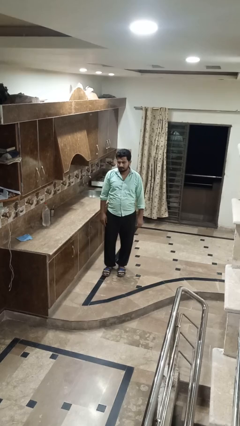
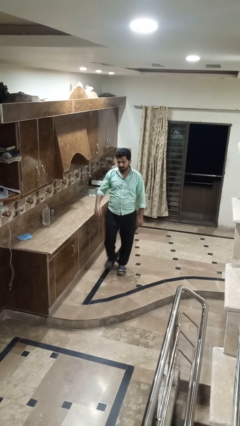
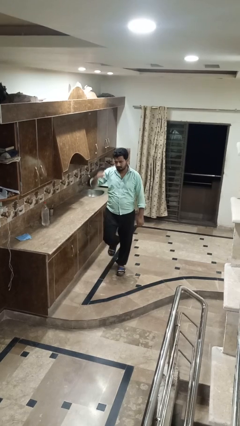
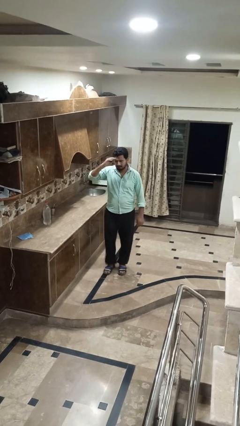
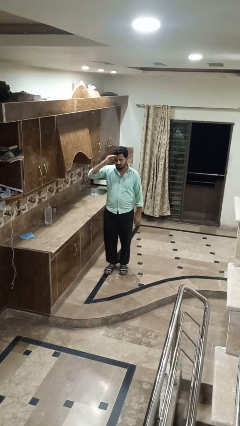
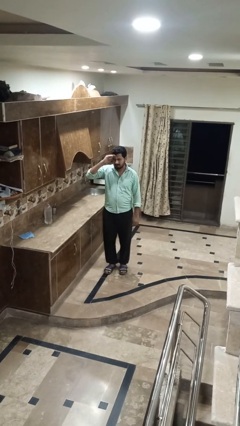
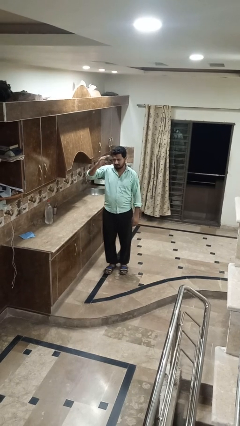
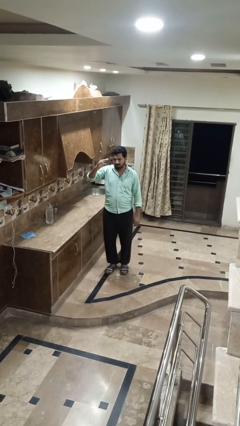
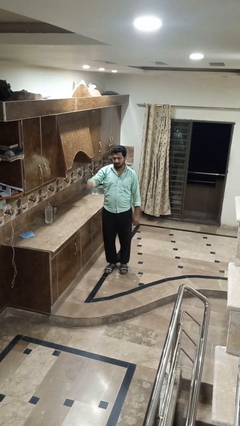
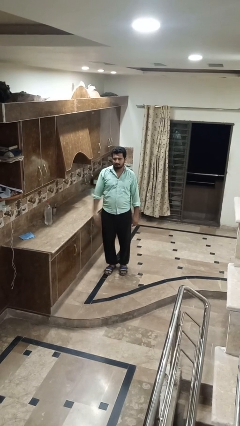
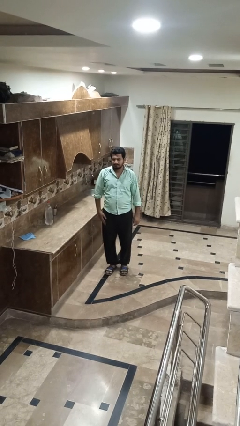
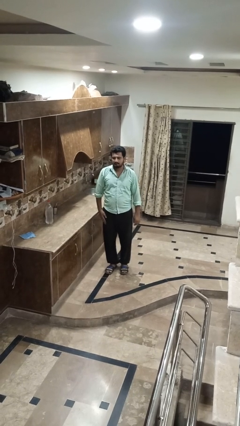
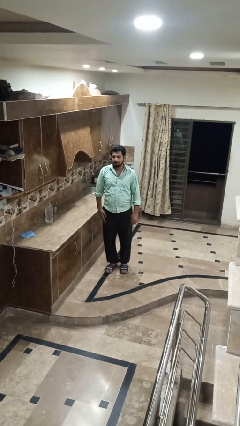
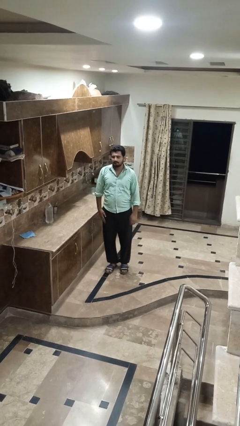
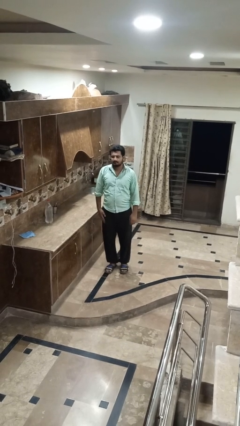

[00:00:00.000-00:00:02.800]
person salutes

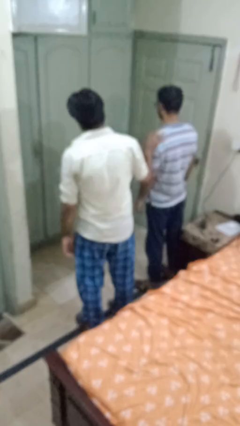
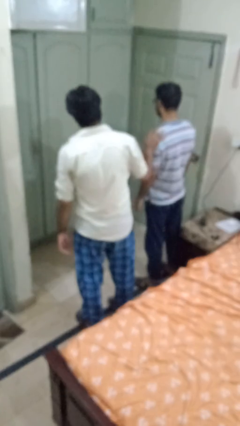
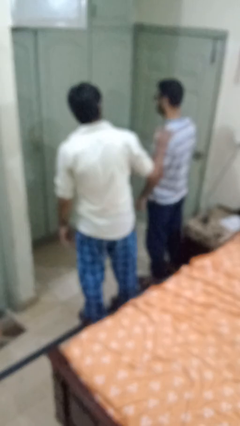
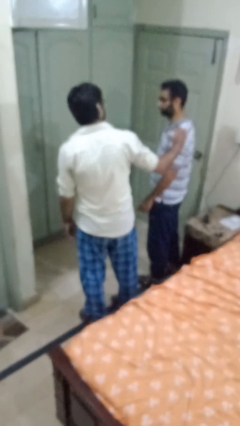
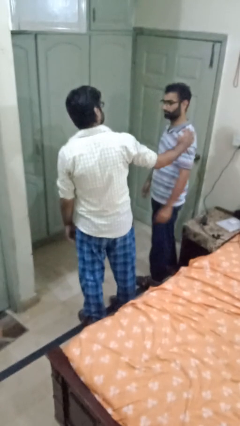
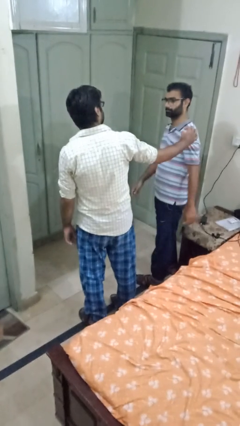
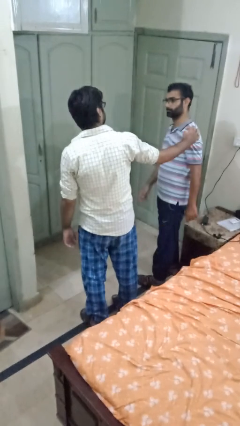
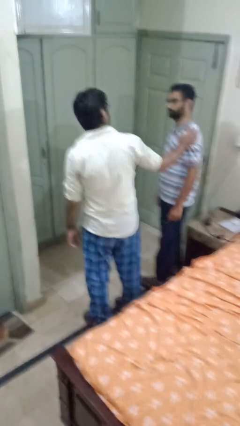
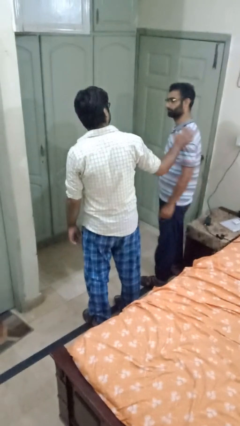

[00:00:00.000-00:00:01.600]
person spins person around

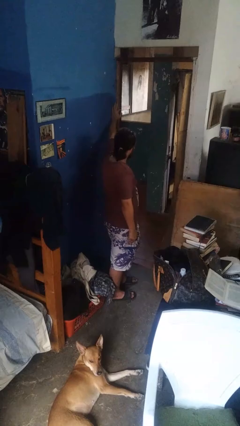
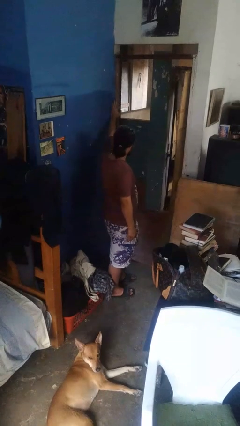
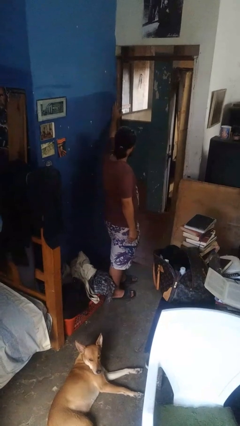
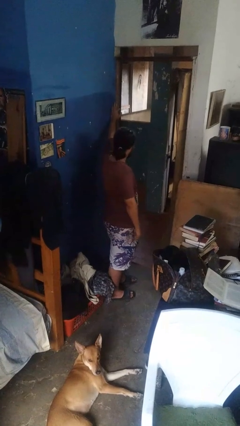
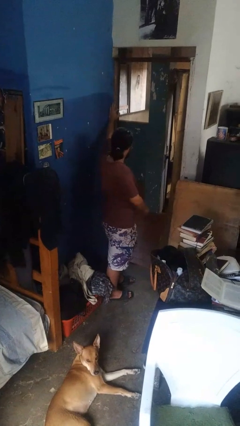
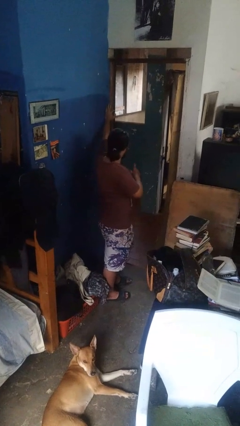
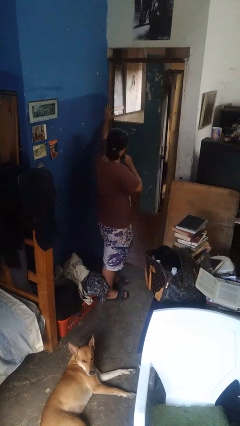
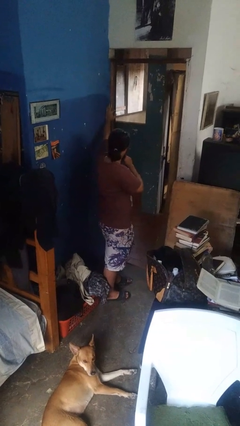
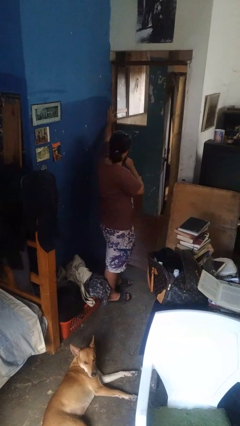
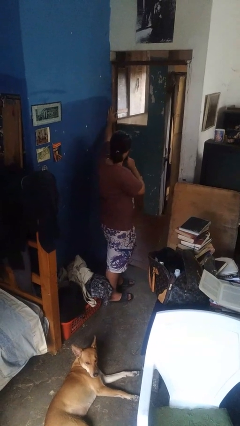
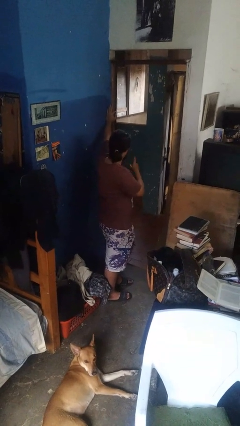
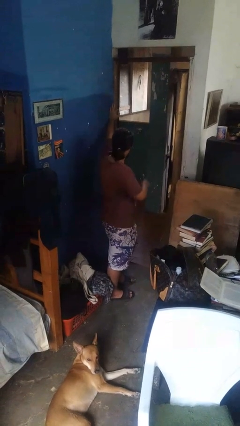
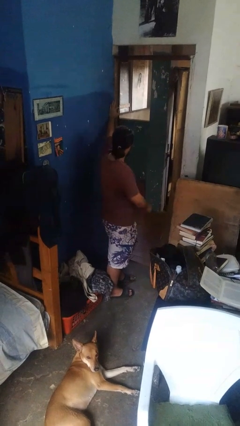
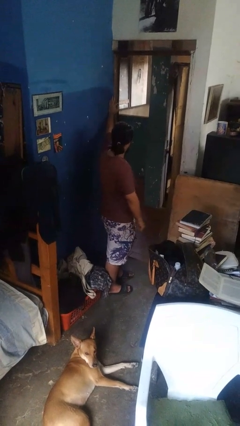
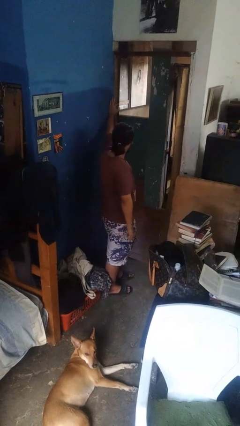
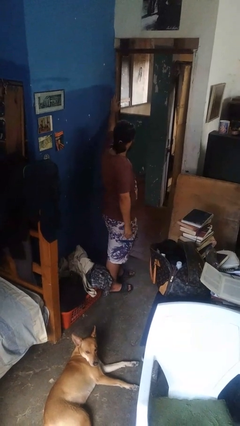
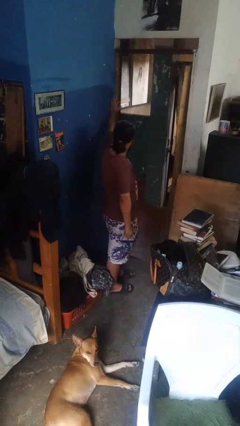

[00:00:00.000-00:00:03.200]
person gestures be quiet

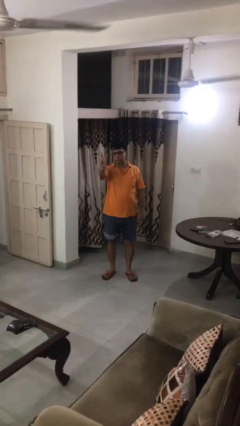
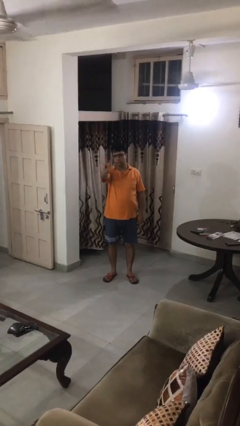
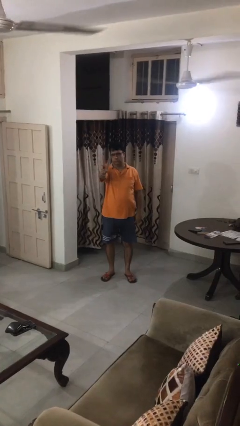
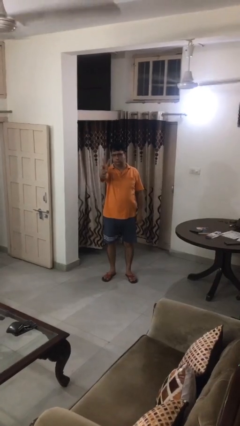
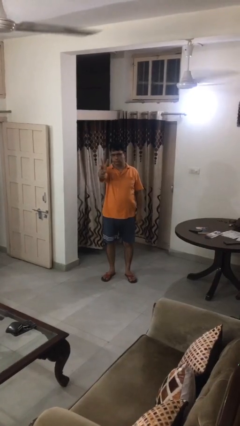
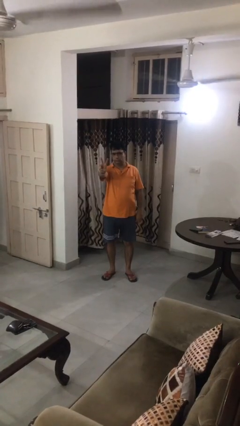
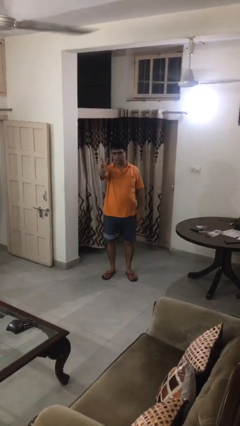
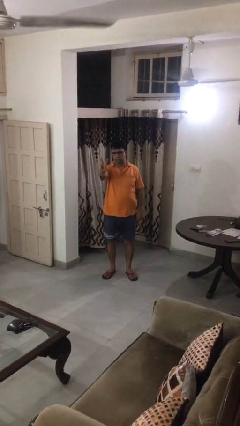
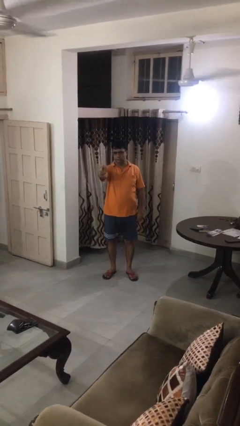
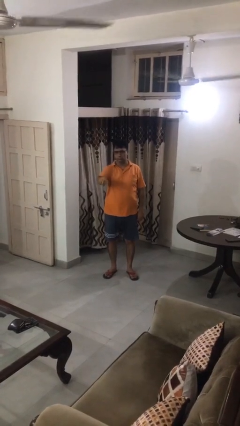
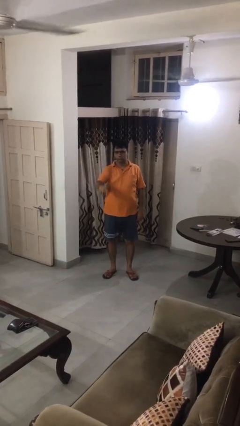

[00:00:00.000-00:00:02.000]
person gestures peace

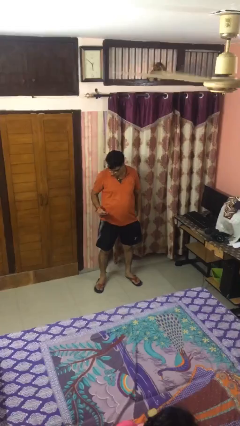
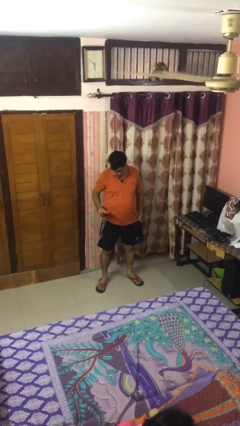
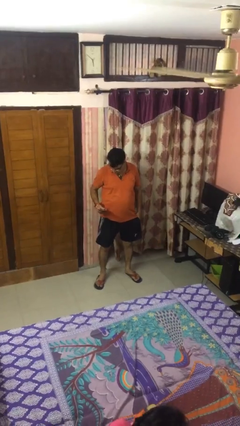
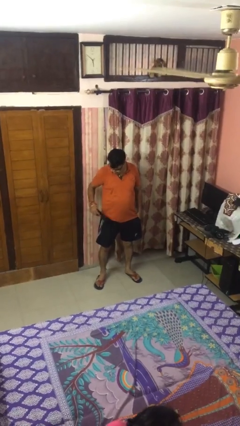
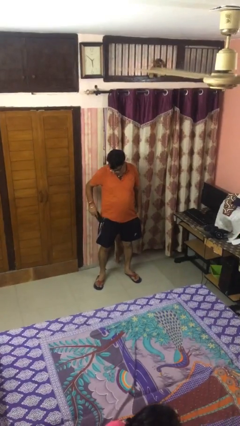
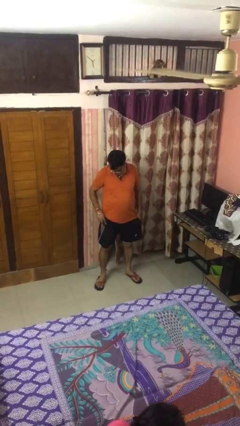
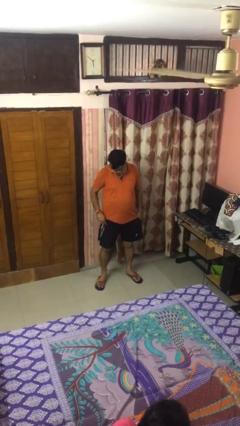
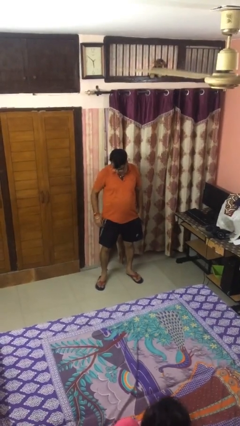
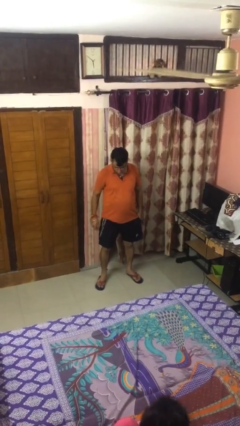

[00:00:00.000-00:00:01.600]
person puts phone into pocket

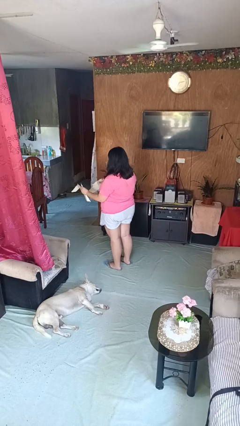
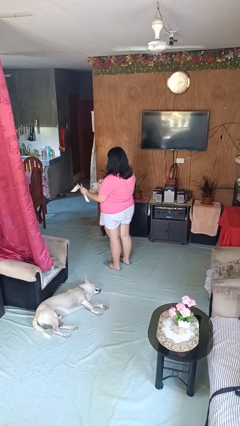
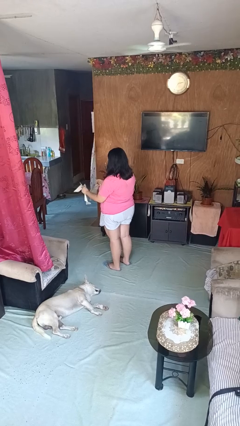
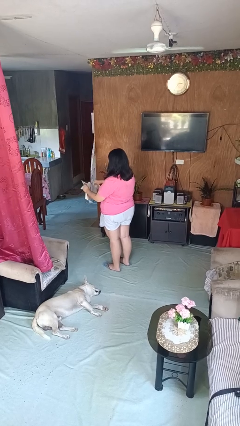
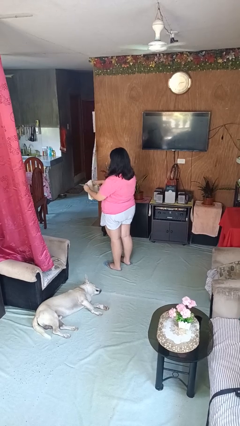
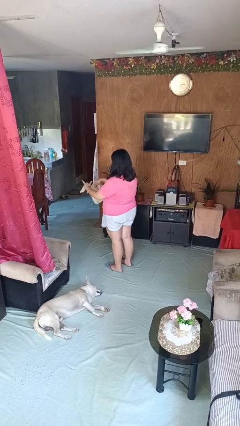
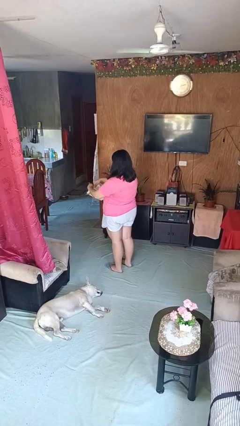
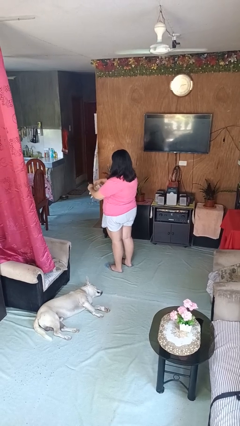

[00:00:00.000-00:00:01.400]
person tears paper

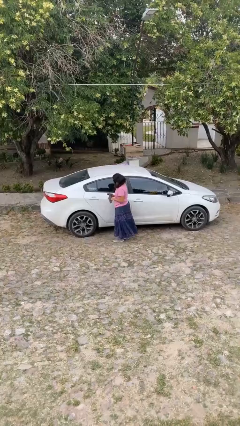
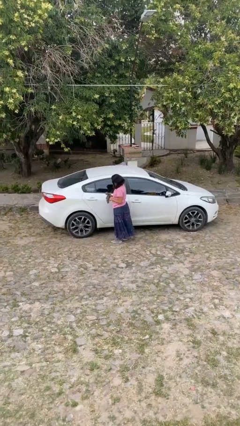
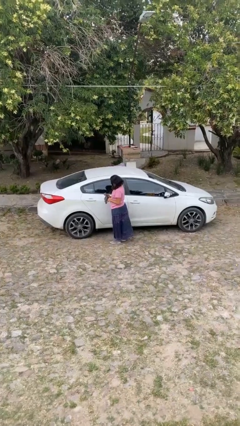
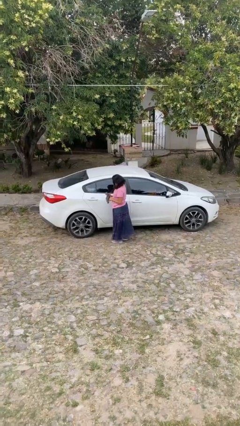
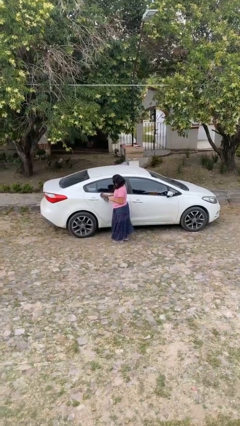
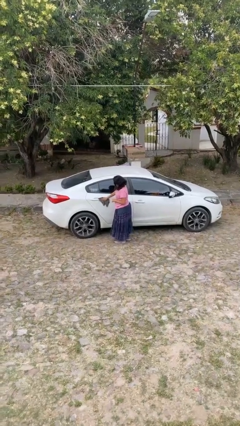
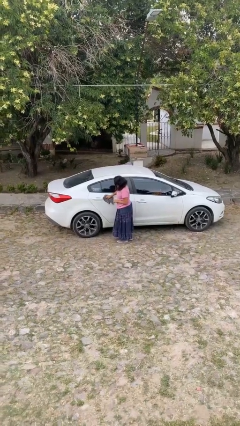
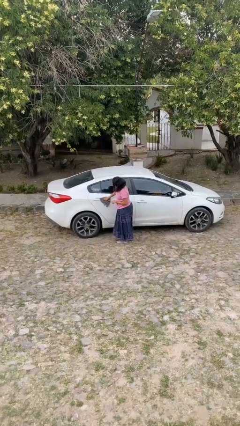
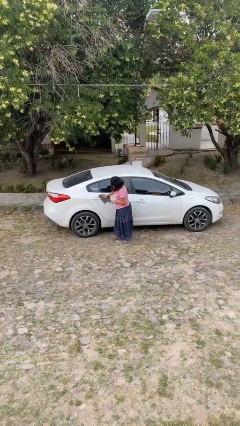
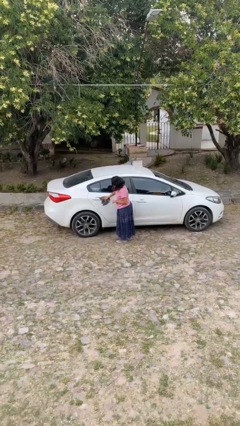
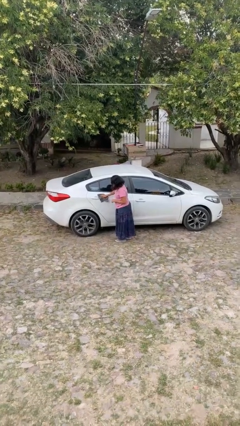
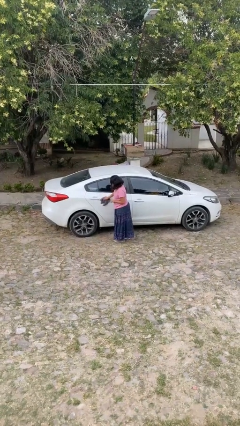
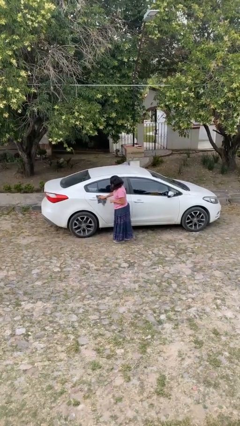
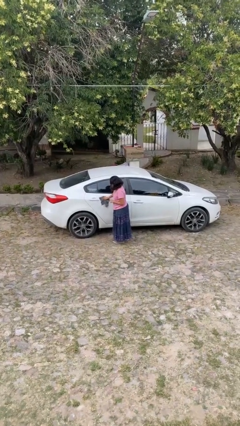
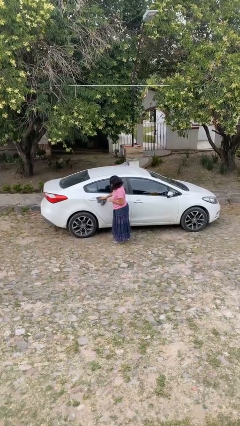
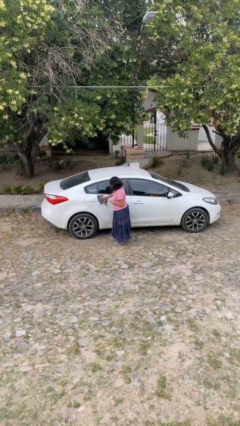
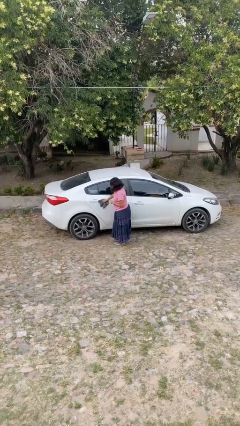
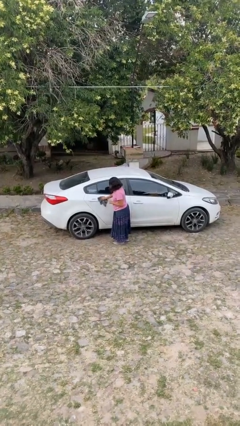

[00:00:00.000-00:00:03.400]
person polishes car with rag

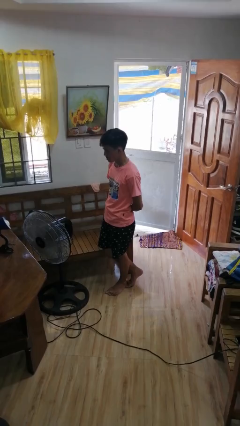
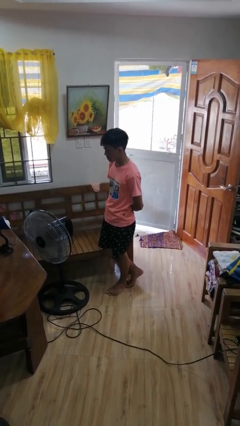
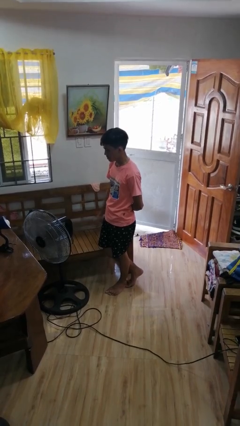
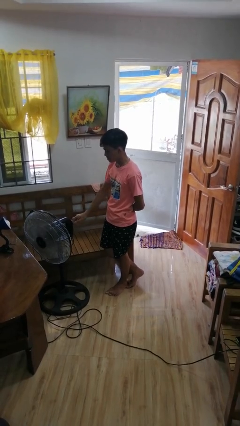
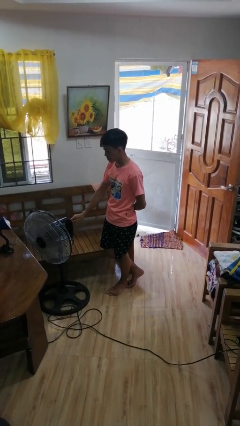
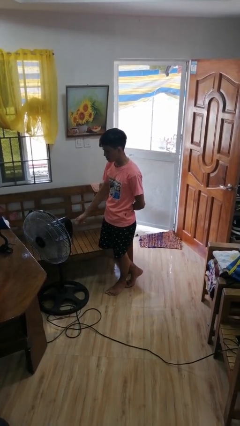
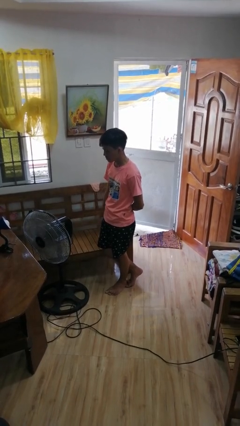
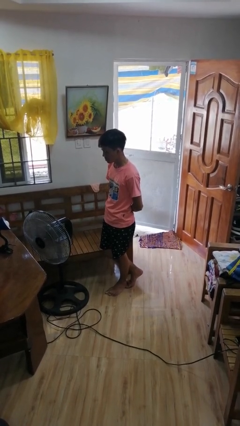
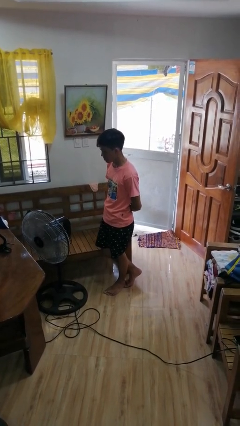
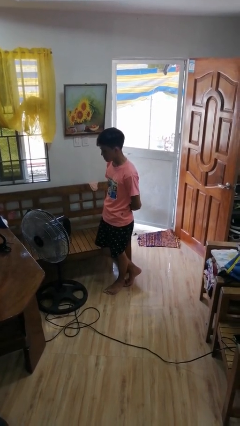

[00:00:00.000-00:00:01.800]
person turns off fan
